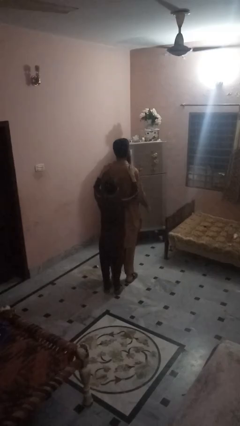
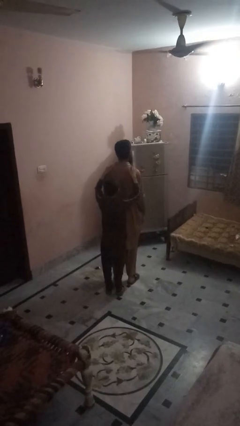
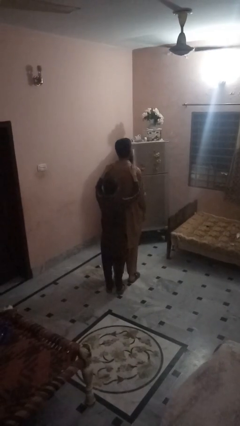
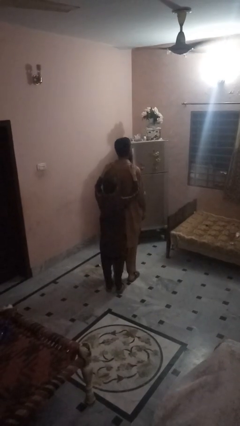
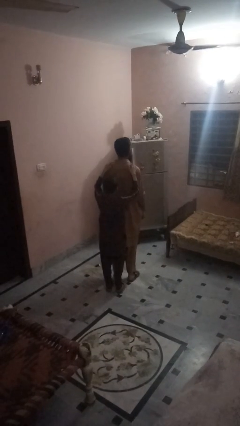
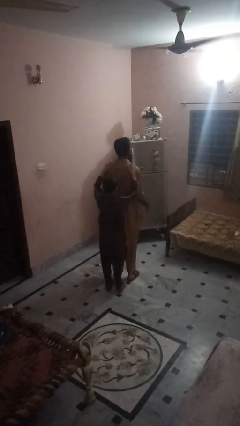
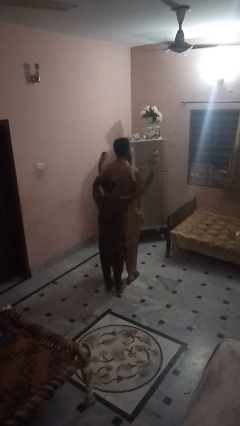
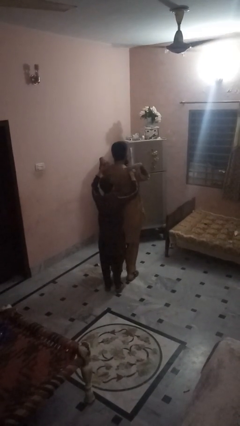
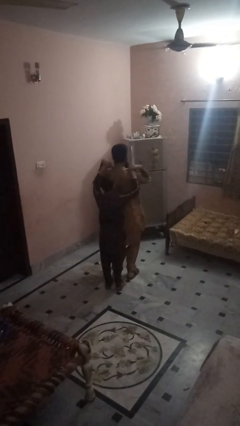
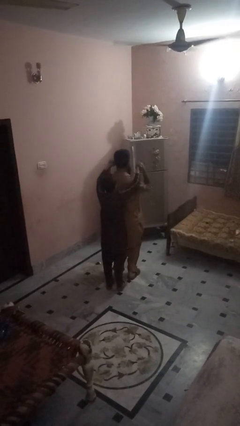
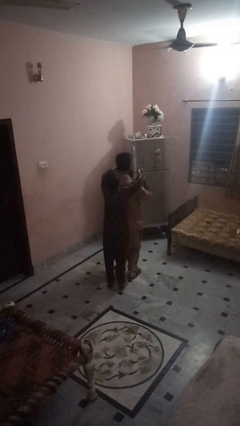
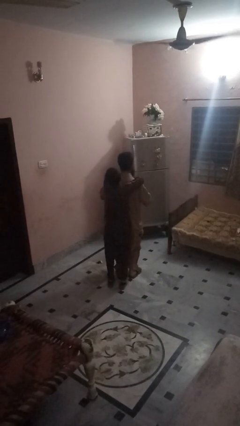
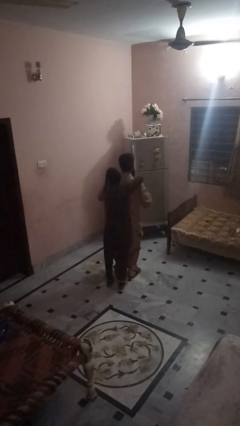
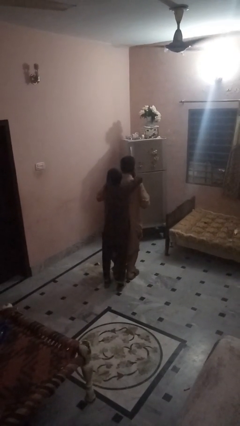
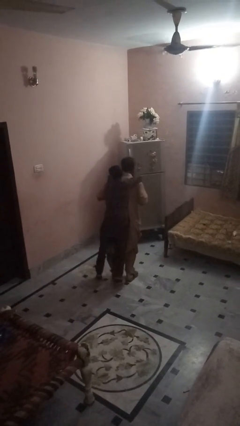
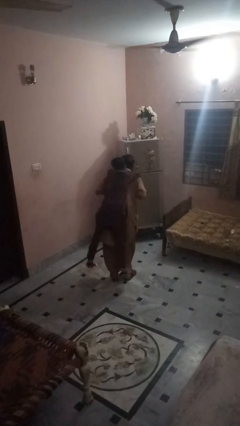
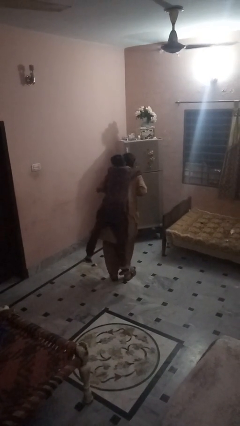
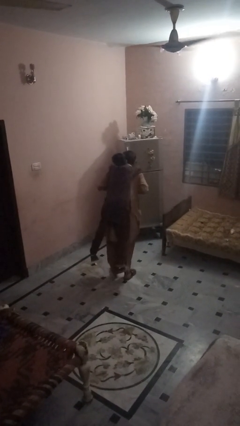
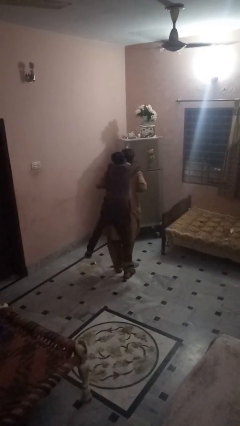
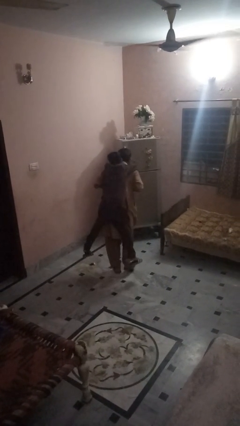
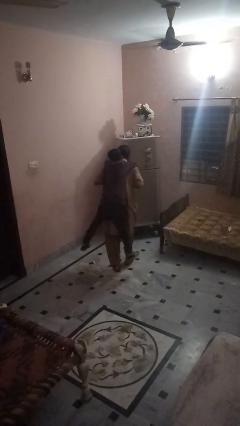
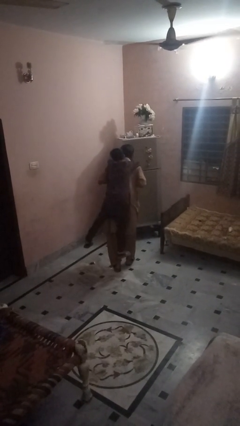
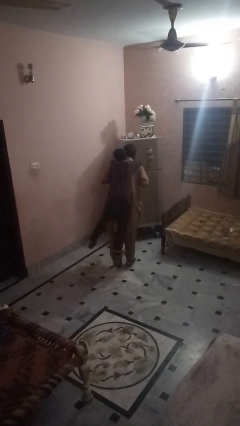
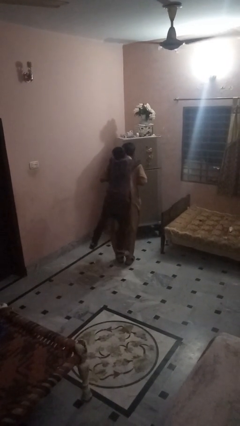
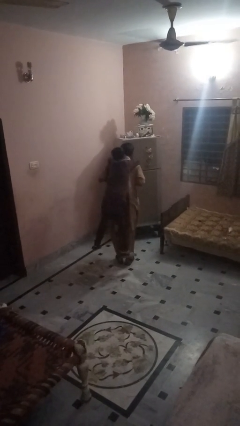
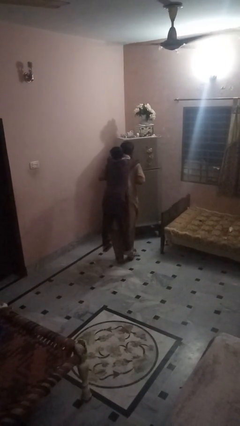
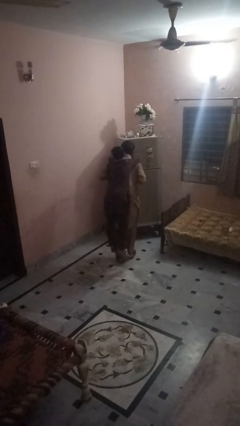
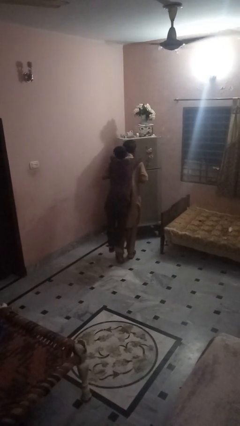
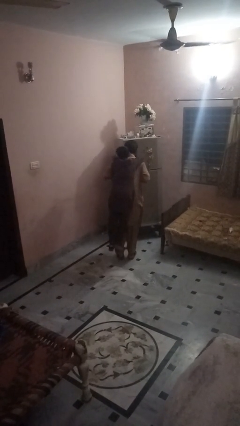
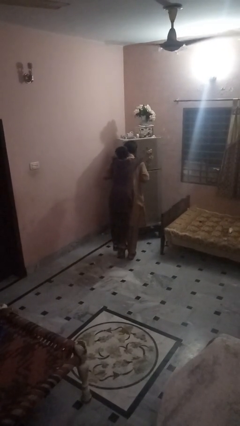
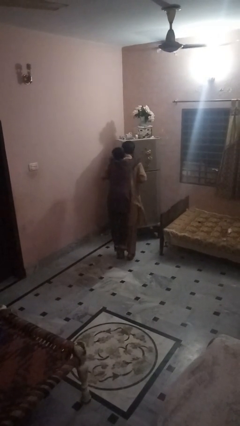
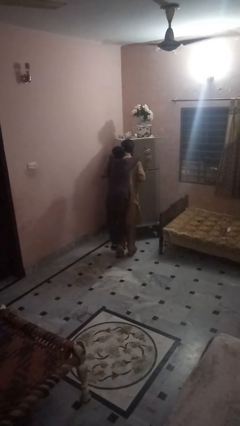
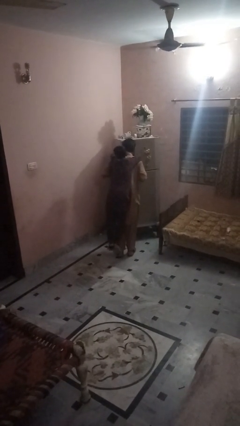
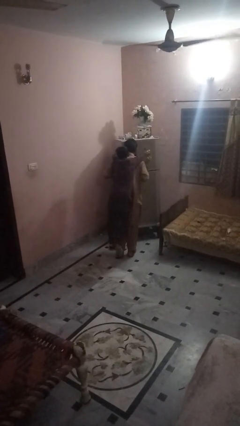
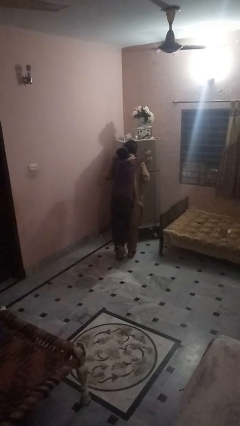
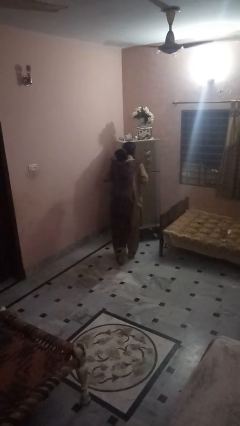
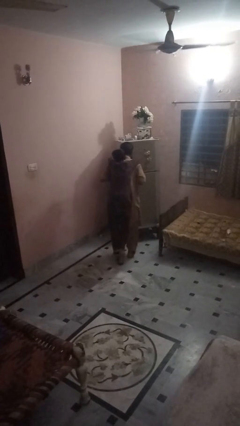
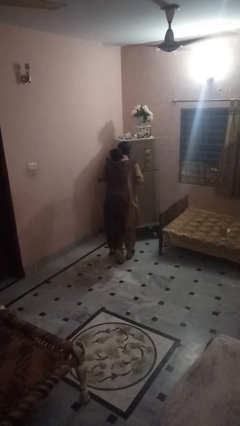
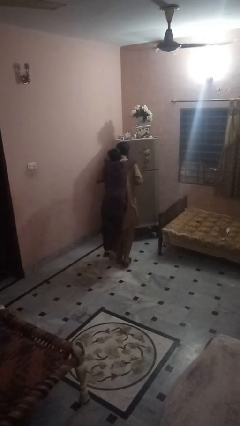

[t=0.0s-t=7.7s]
person carries person on back

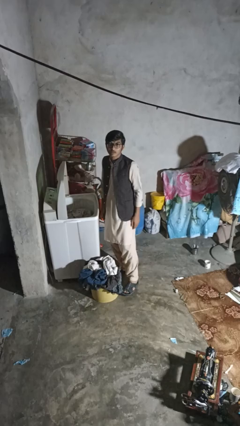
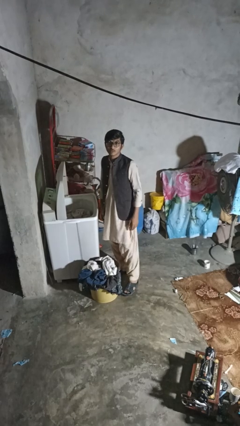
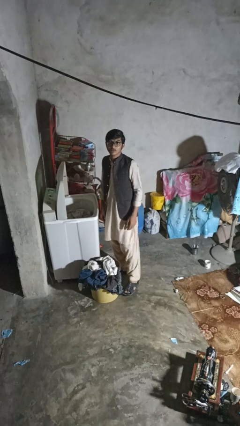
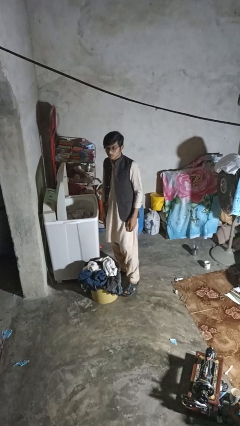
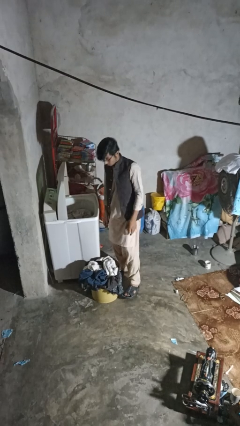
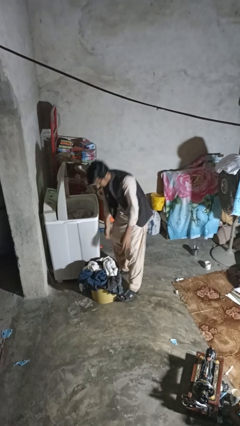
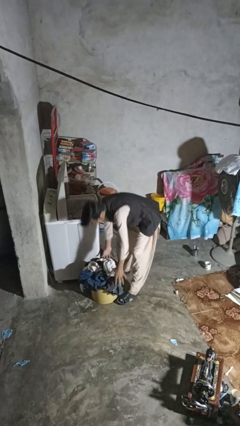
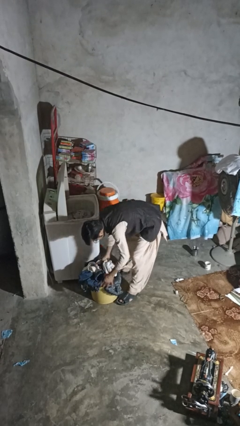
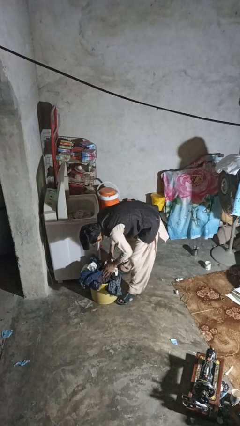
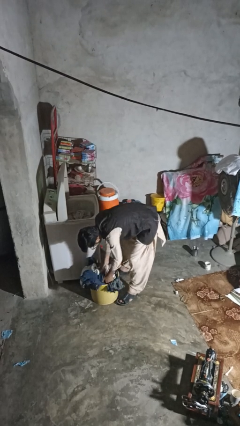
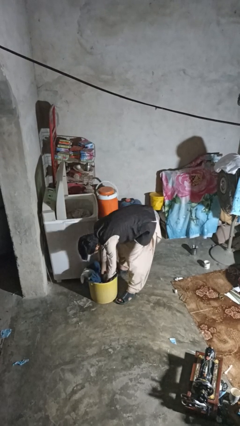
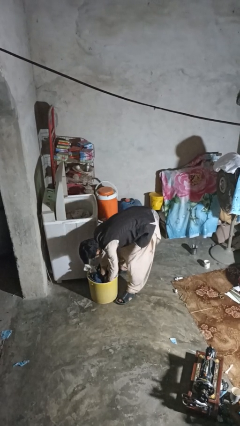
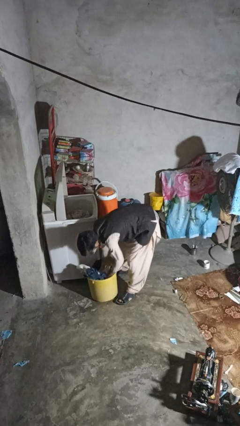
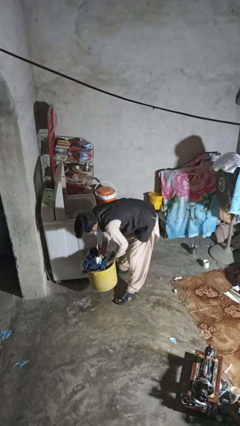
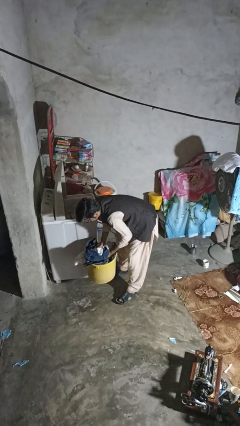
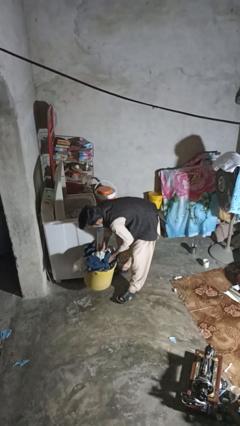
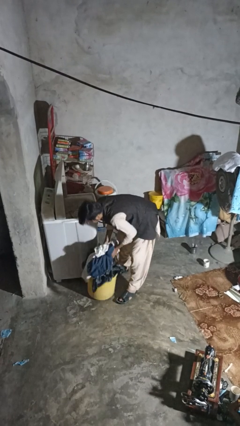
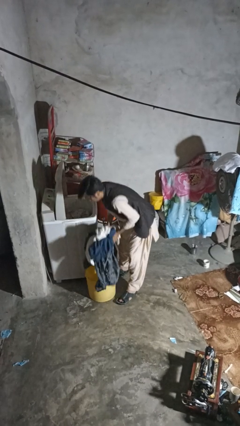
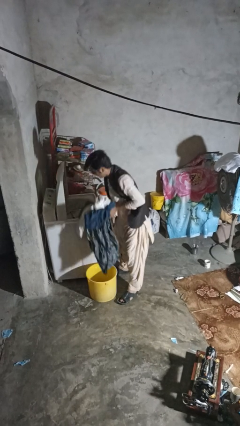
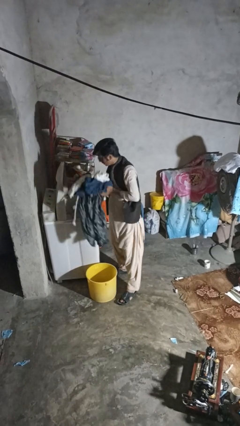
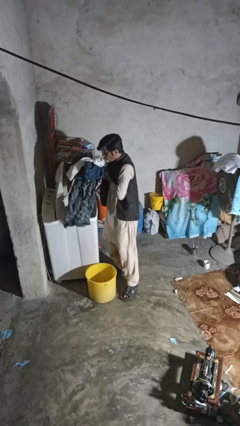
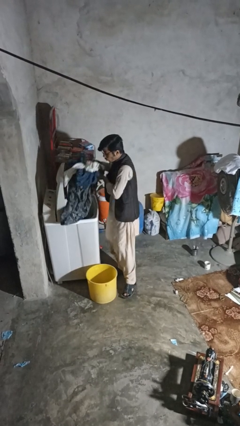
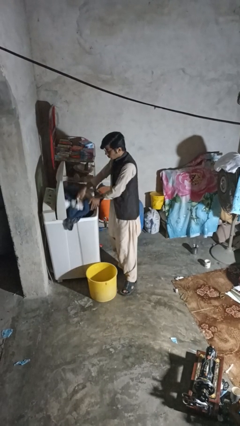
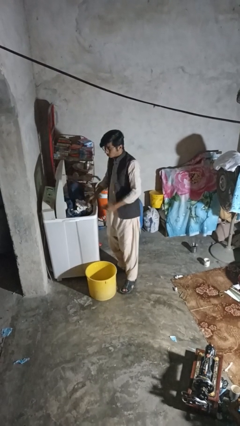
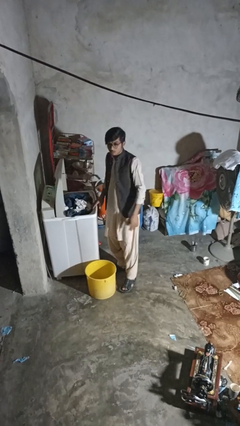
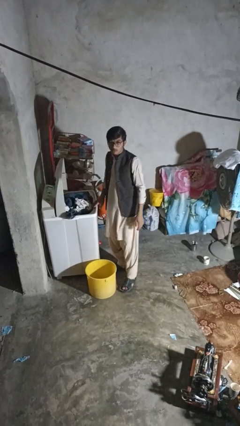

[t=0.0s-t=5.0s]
person loads dryer

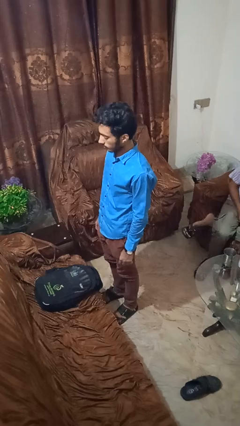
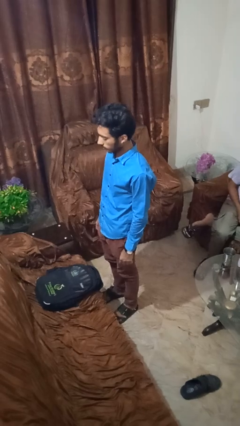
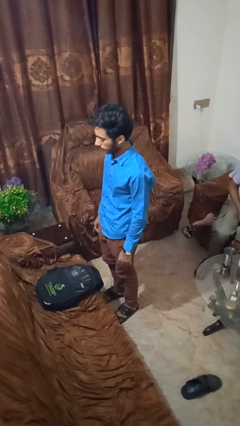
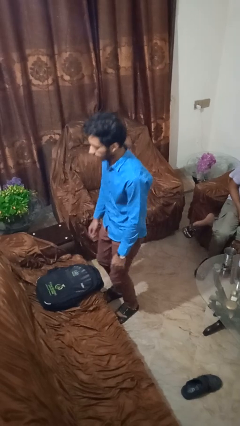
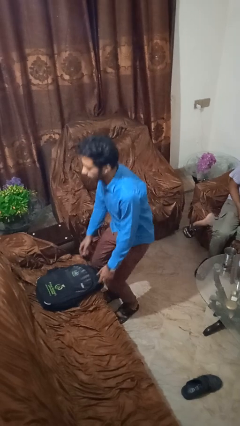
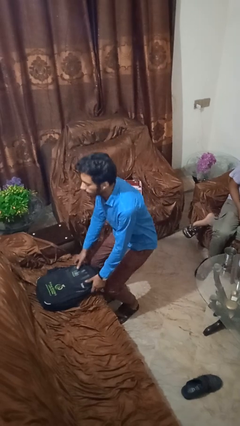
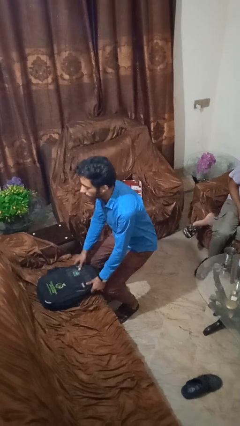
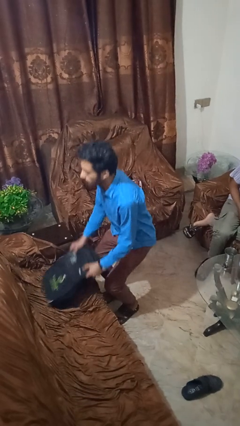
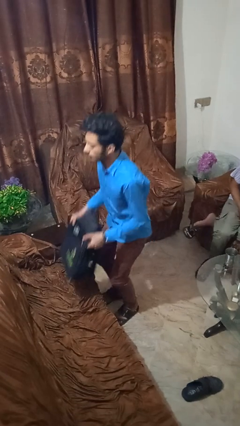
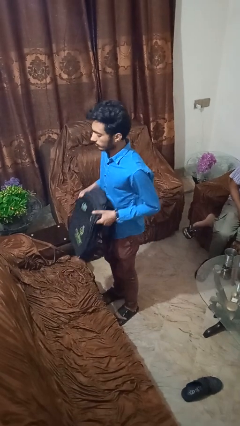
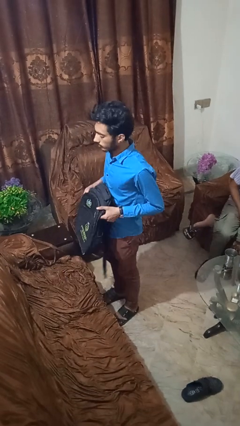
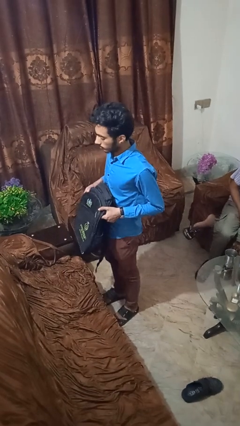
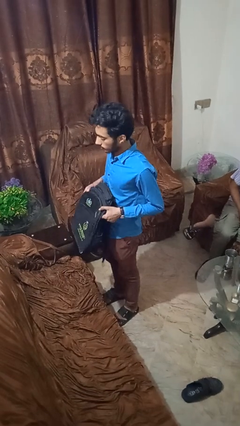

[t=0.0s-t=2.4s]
person picks up object from couch

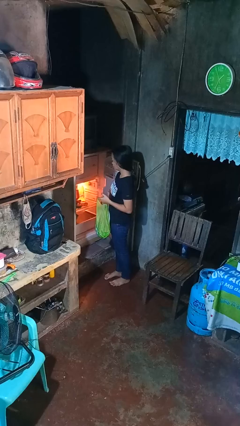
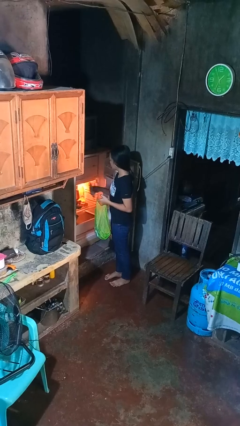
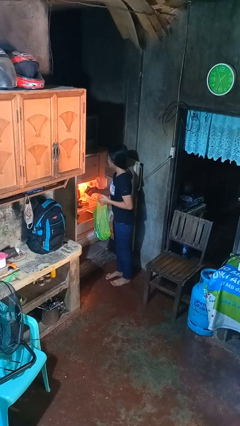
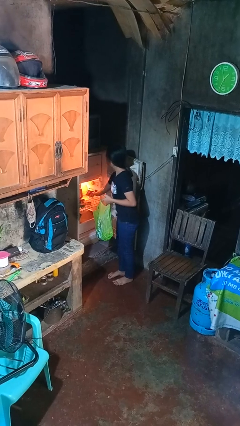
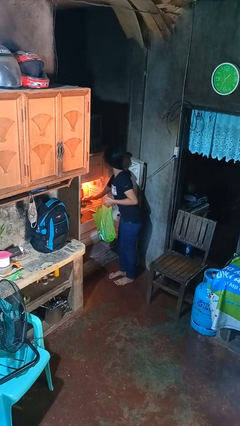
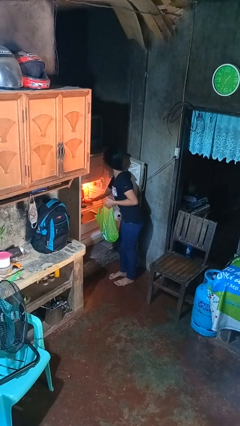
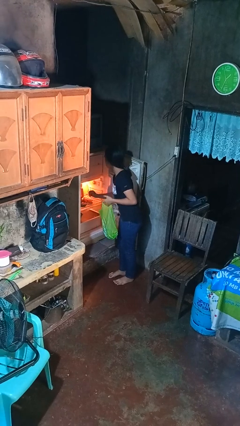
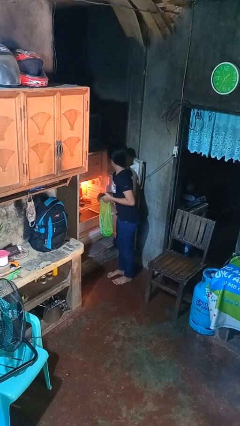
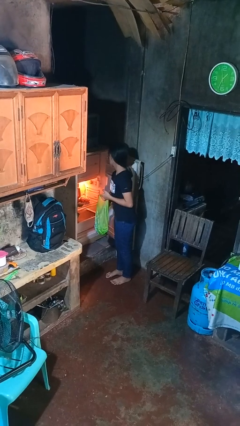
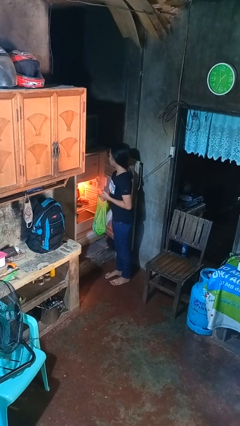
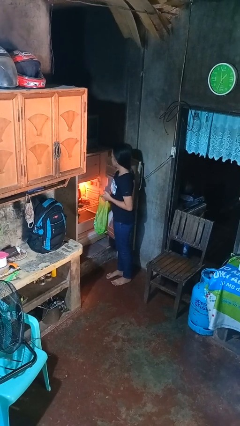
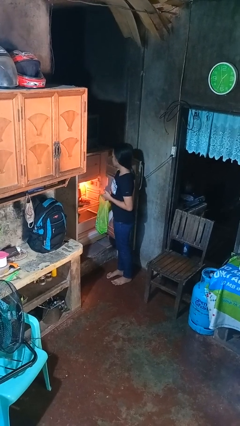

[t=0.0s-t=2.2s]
person loads groceries into refrigerator

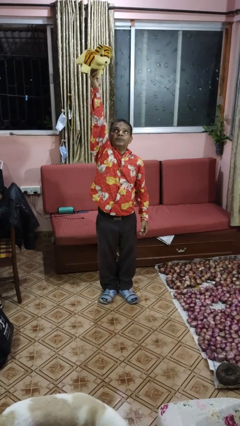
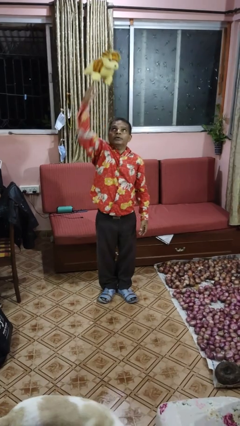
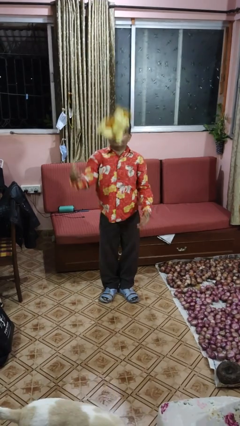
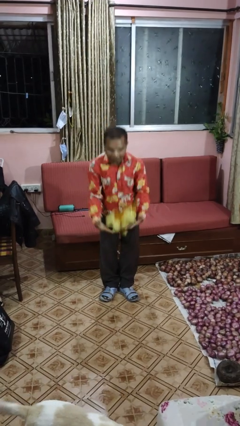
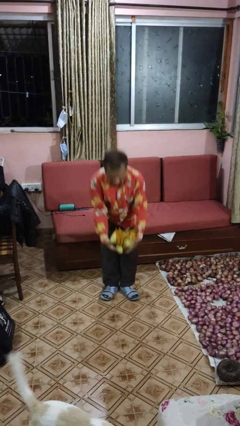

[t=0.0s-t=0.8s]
person drops object
